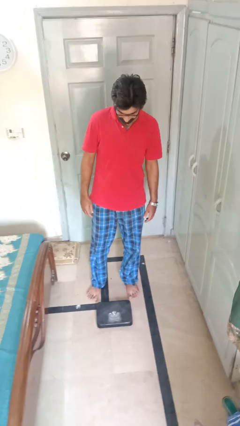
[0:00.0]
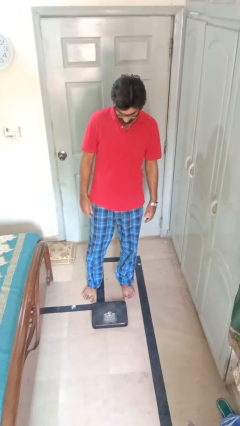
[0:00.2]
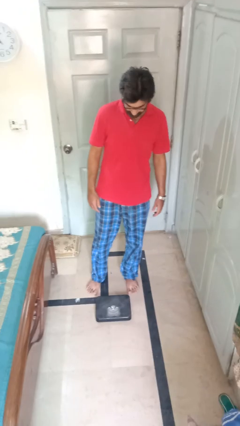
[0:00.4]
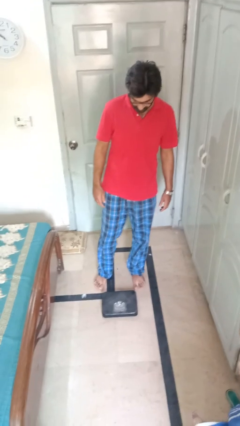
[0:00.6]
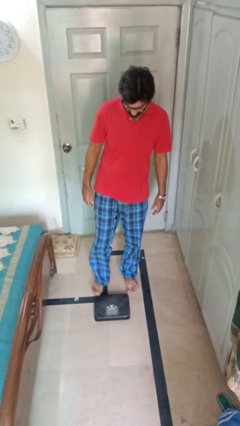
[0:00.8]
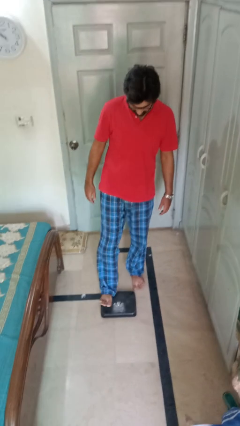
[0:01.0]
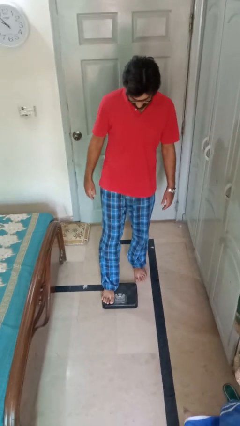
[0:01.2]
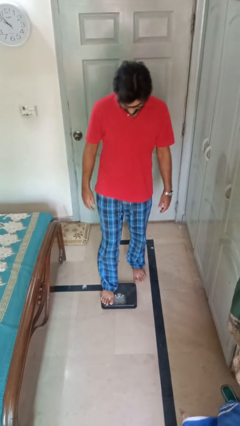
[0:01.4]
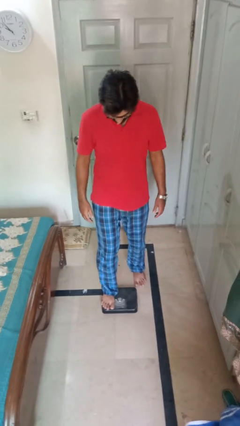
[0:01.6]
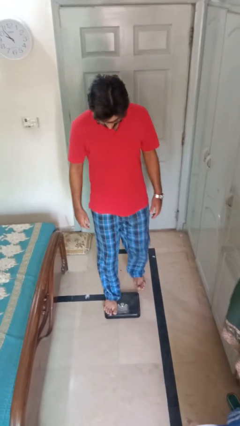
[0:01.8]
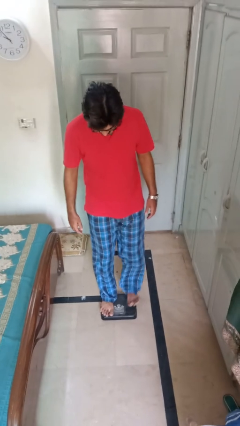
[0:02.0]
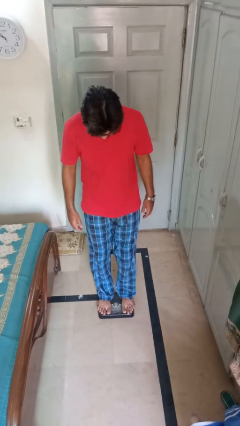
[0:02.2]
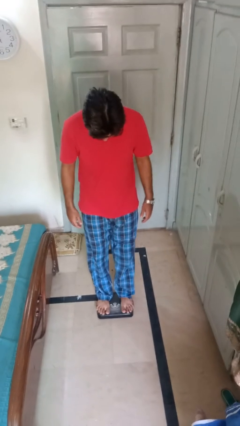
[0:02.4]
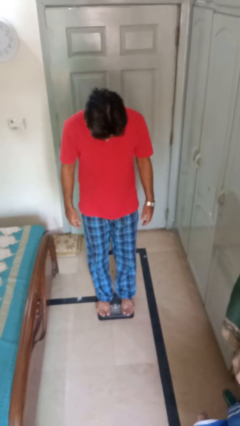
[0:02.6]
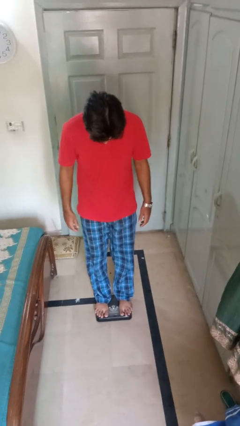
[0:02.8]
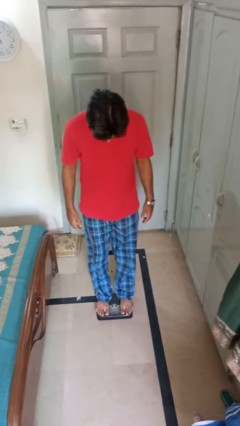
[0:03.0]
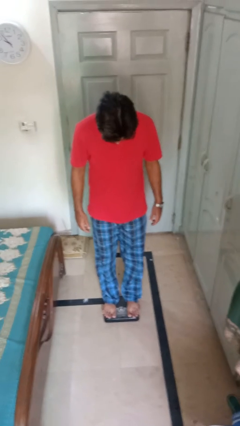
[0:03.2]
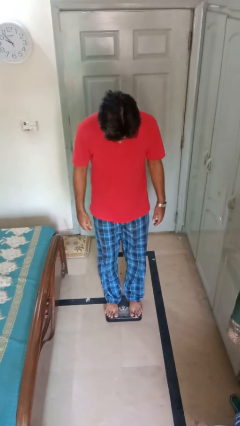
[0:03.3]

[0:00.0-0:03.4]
person uses bodyweight scale

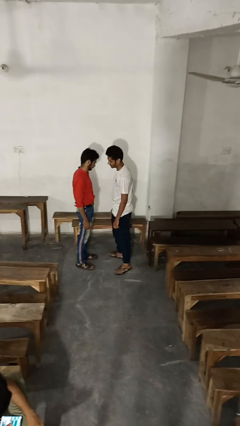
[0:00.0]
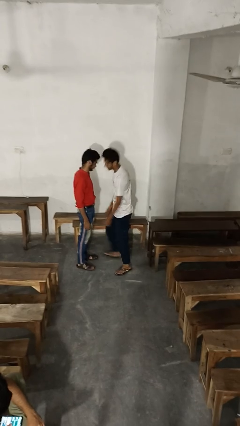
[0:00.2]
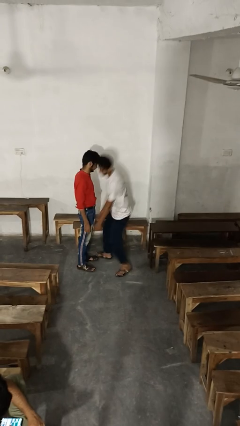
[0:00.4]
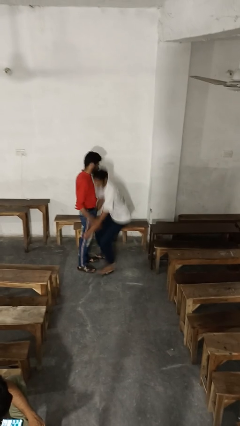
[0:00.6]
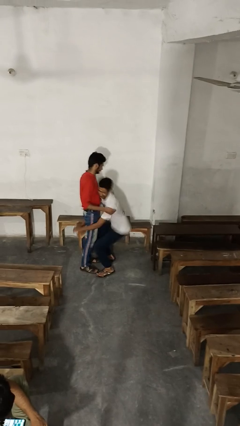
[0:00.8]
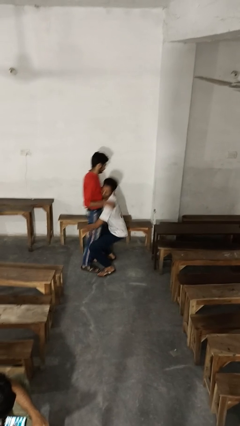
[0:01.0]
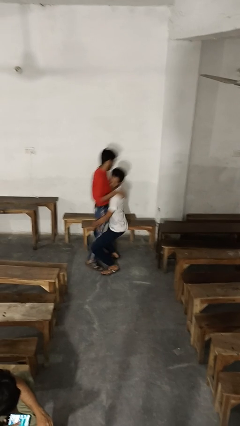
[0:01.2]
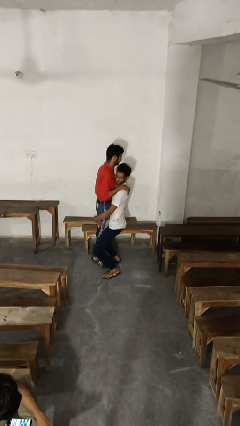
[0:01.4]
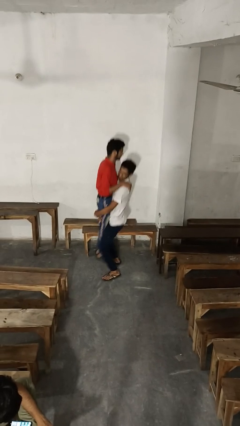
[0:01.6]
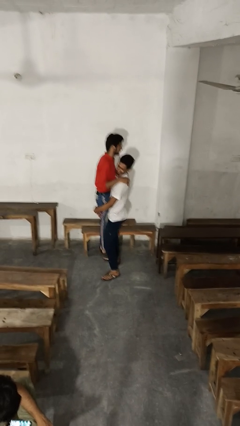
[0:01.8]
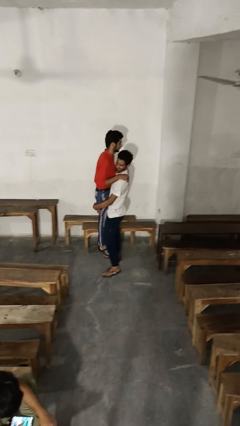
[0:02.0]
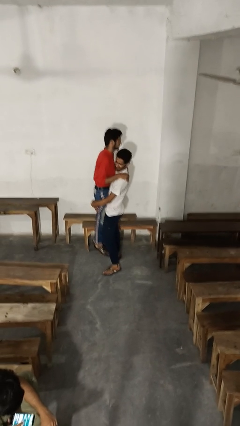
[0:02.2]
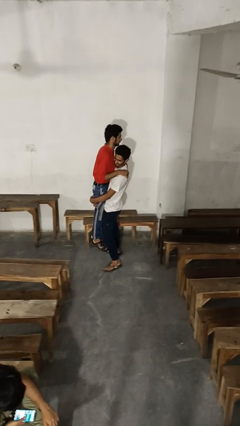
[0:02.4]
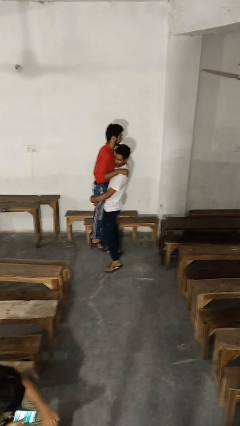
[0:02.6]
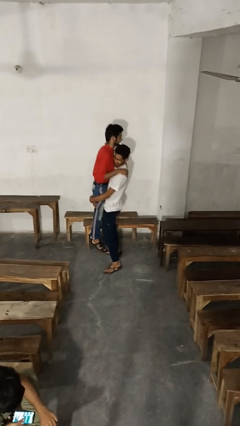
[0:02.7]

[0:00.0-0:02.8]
person picks up person

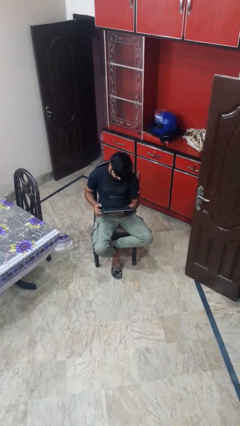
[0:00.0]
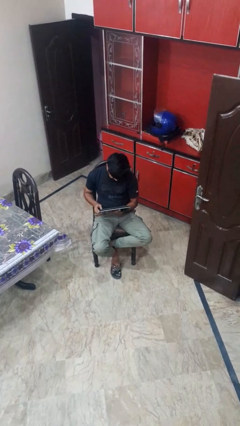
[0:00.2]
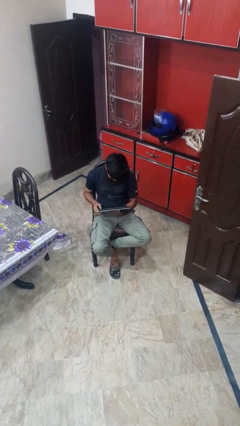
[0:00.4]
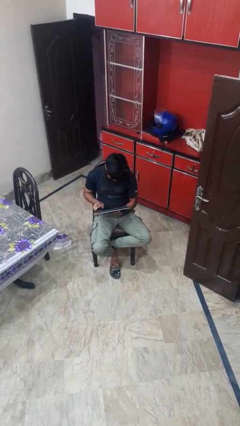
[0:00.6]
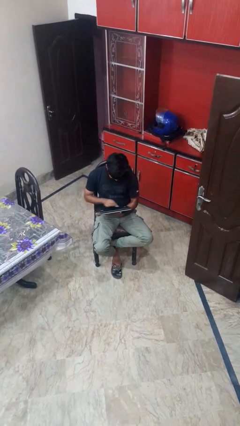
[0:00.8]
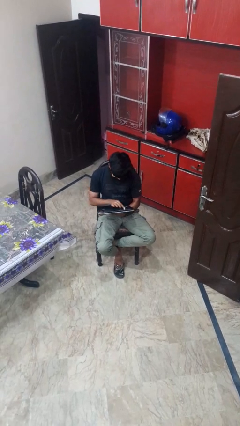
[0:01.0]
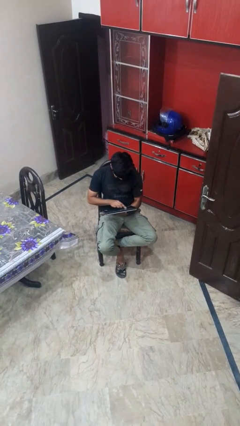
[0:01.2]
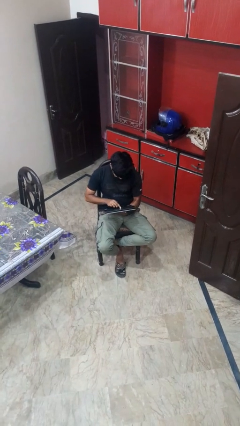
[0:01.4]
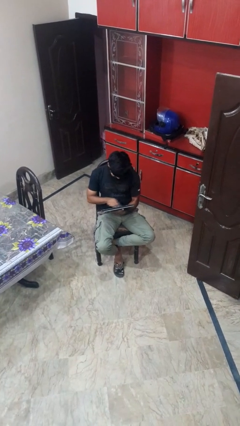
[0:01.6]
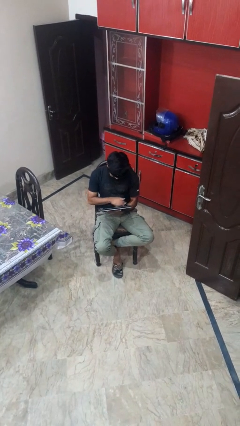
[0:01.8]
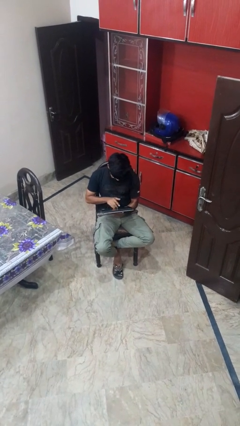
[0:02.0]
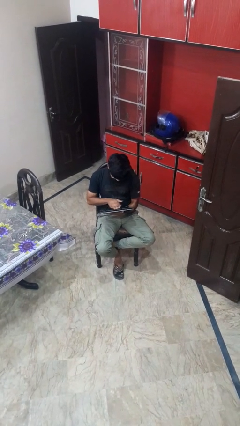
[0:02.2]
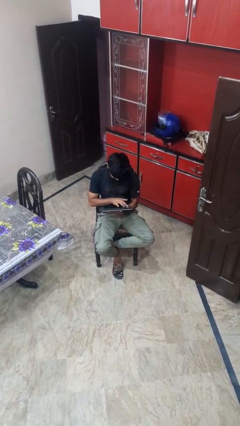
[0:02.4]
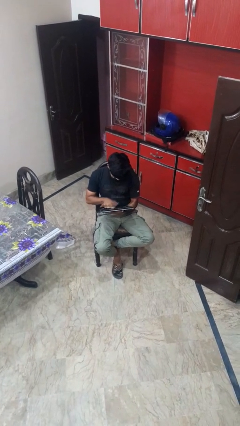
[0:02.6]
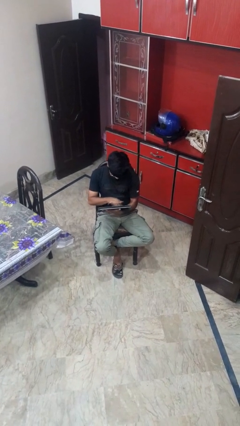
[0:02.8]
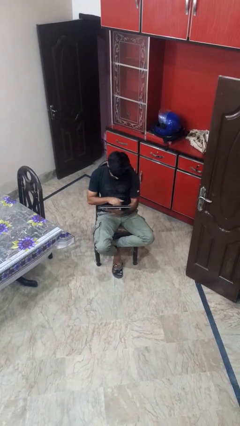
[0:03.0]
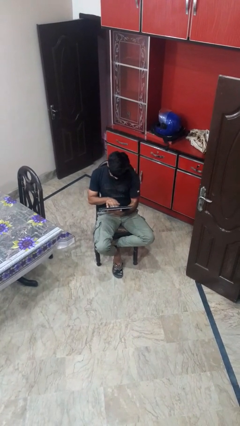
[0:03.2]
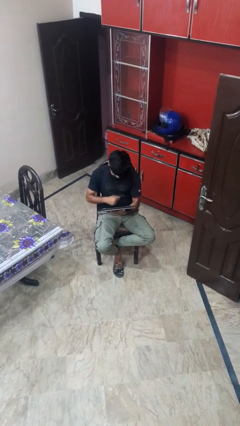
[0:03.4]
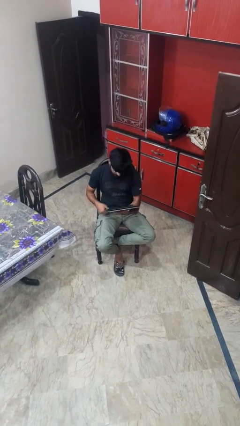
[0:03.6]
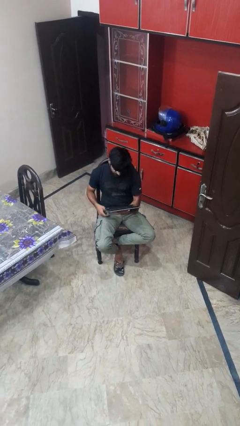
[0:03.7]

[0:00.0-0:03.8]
person interacts with tablet

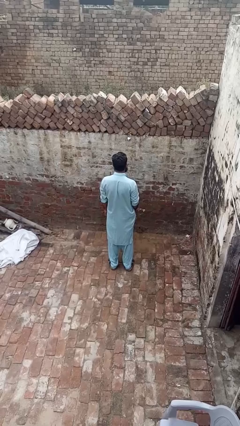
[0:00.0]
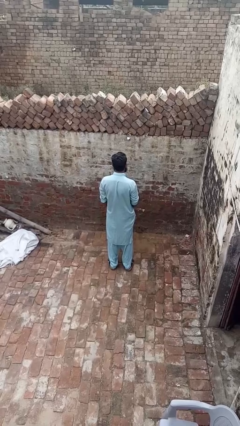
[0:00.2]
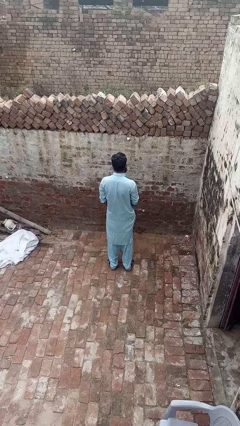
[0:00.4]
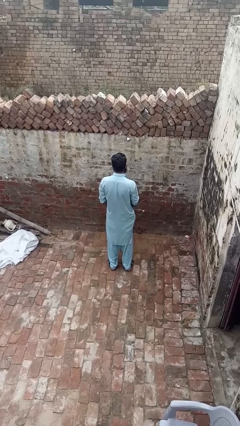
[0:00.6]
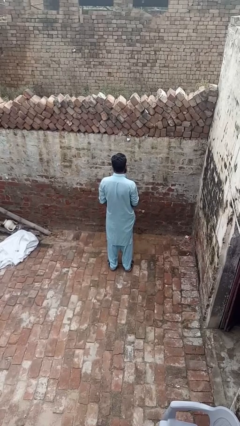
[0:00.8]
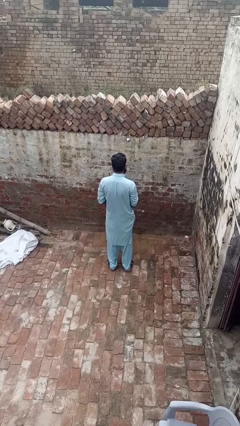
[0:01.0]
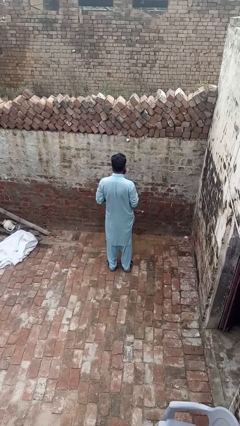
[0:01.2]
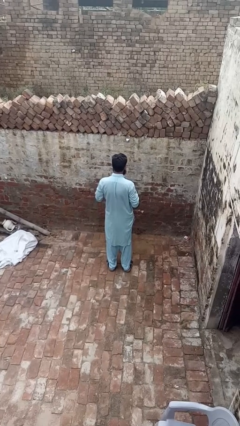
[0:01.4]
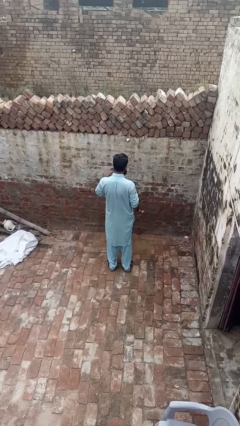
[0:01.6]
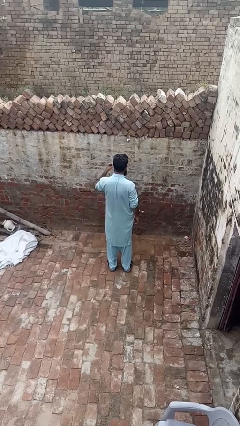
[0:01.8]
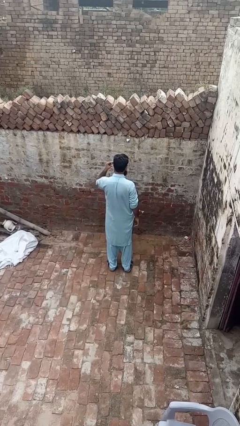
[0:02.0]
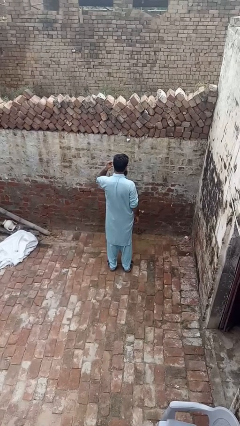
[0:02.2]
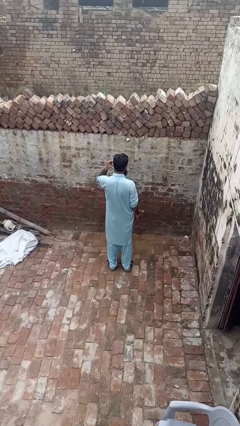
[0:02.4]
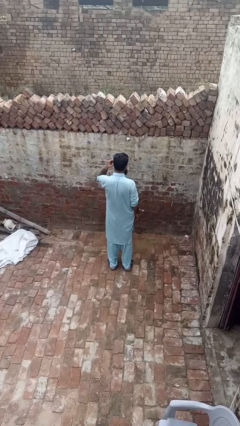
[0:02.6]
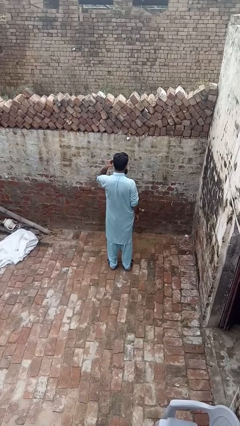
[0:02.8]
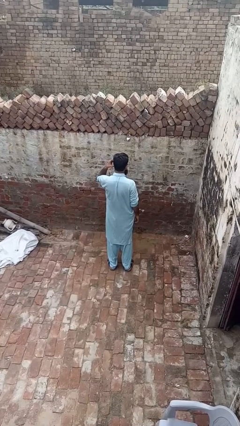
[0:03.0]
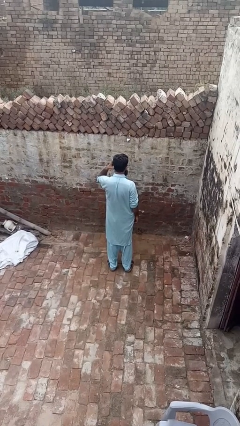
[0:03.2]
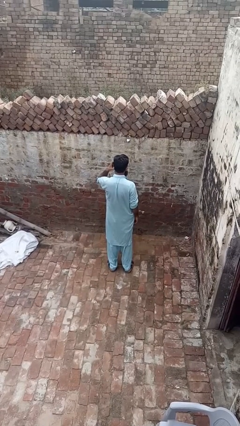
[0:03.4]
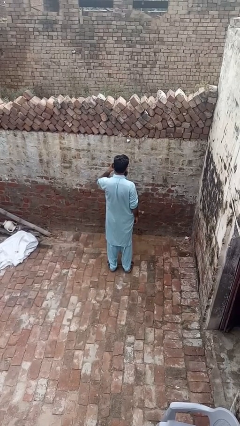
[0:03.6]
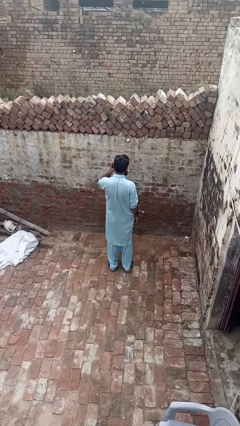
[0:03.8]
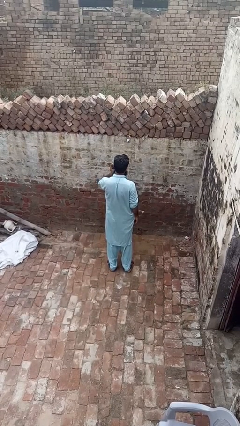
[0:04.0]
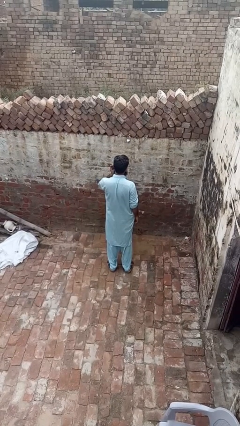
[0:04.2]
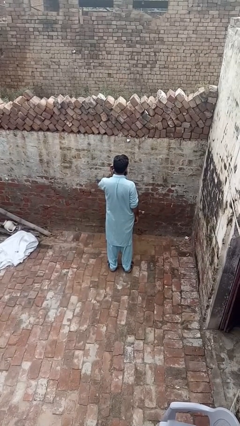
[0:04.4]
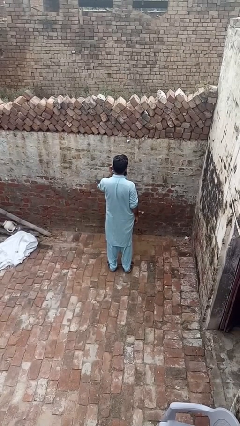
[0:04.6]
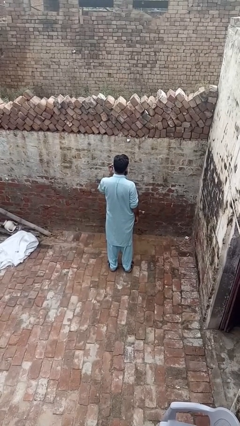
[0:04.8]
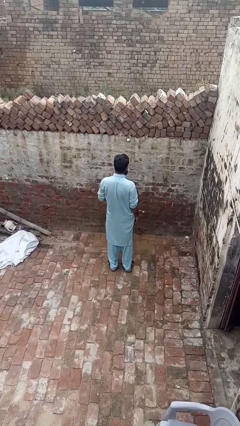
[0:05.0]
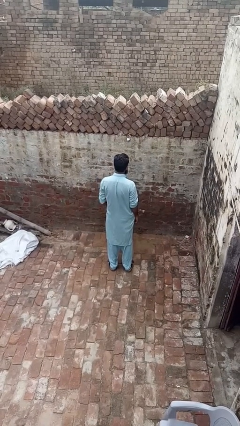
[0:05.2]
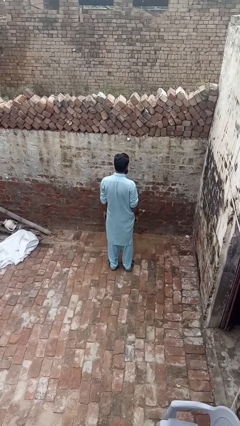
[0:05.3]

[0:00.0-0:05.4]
person puts on earrings

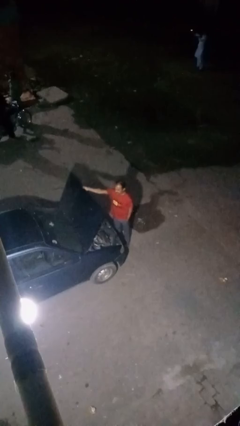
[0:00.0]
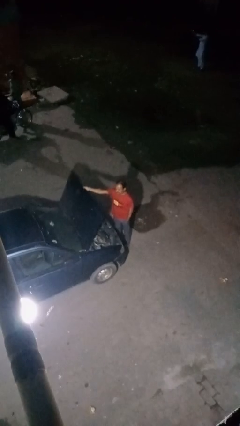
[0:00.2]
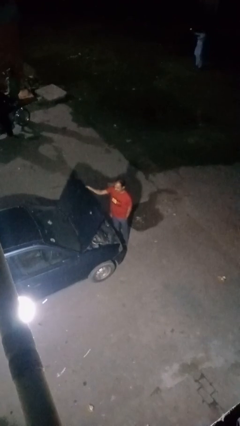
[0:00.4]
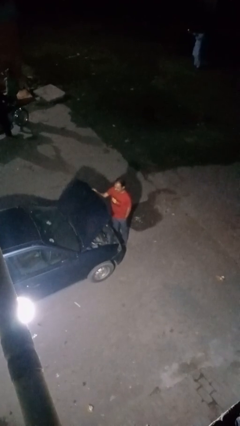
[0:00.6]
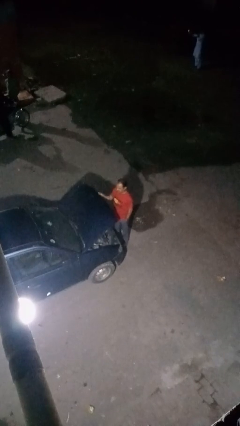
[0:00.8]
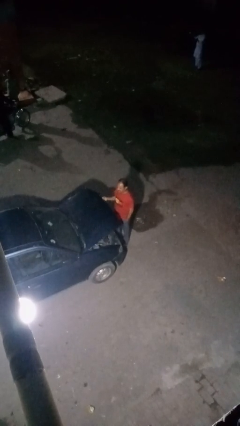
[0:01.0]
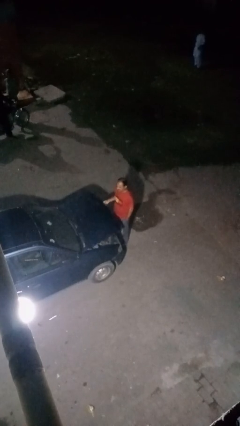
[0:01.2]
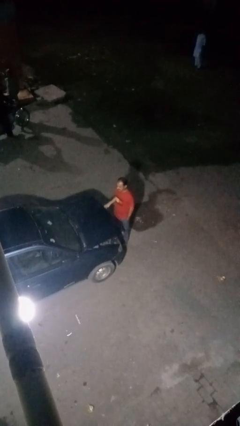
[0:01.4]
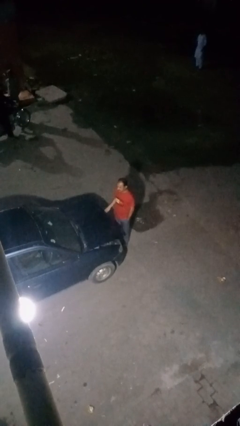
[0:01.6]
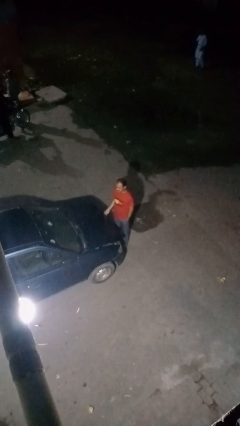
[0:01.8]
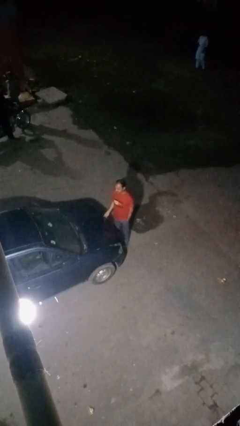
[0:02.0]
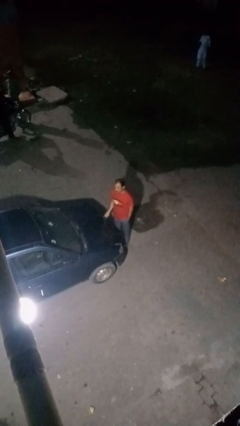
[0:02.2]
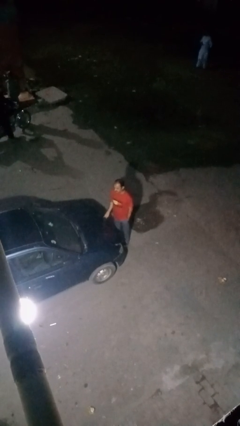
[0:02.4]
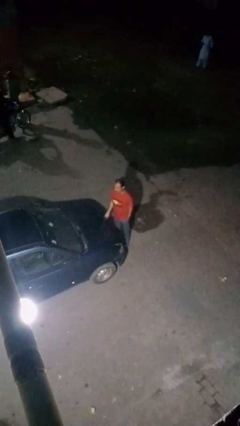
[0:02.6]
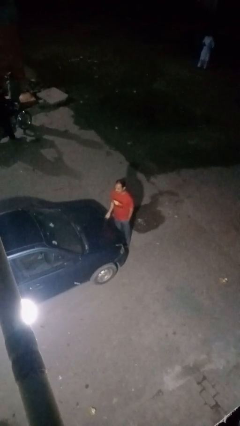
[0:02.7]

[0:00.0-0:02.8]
person closes car hood
